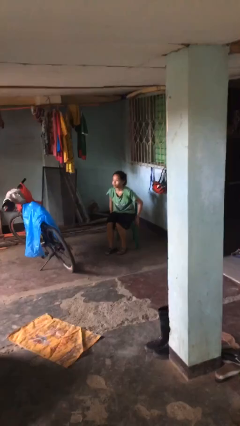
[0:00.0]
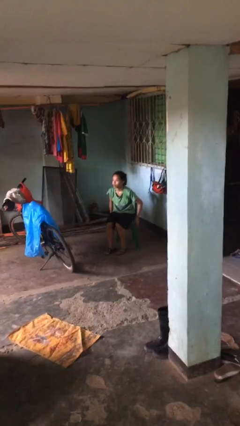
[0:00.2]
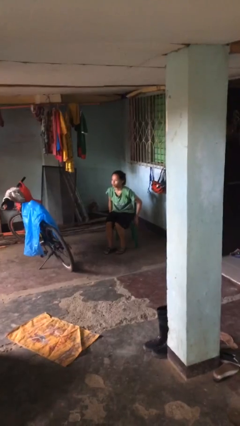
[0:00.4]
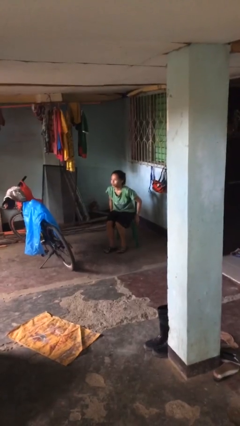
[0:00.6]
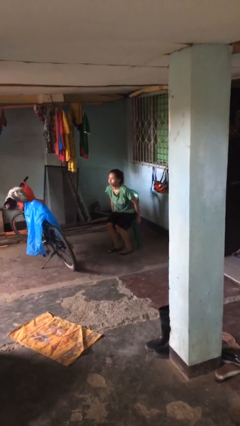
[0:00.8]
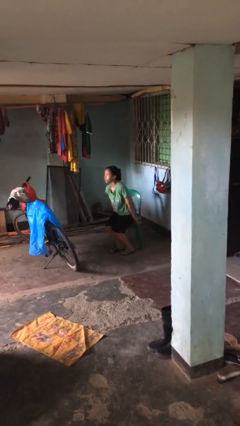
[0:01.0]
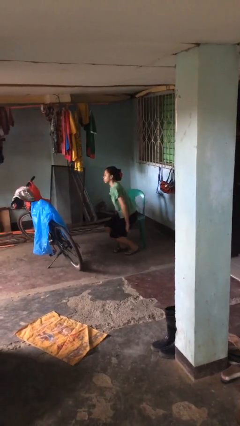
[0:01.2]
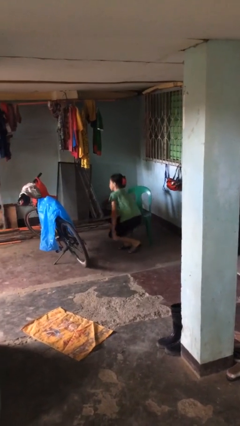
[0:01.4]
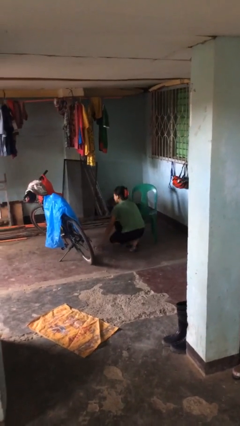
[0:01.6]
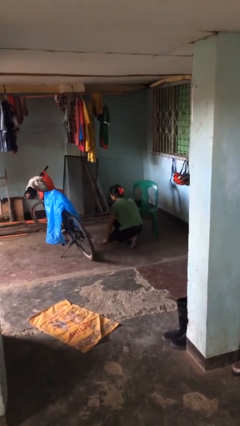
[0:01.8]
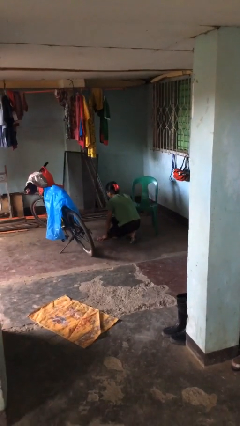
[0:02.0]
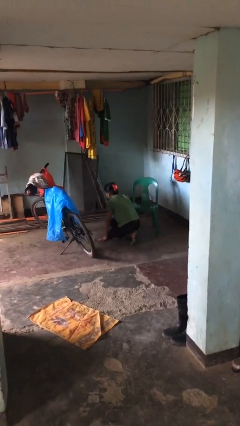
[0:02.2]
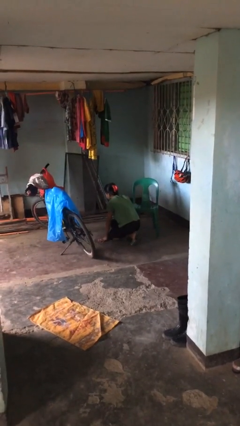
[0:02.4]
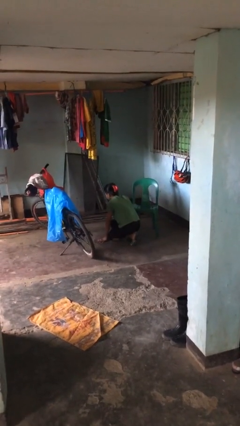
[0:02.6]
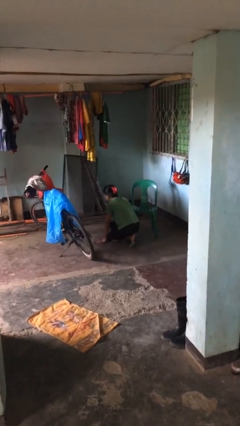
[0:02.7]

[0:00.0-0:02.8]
person falls from chair

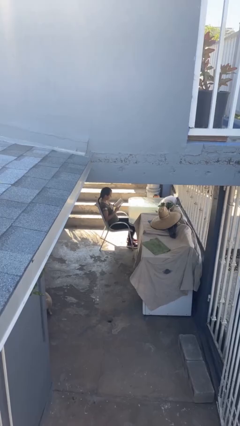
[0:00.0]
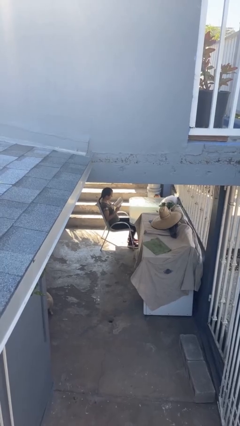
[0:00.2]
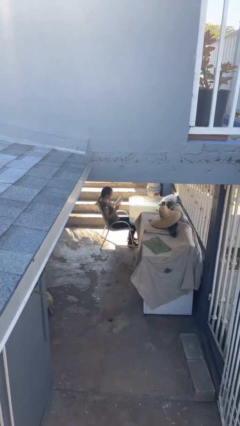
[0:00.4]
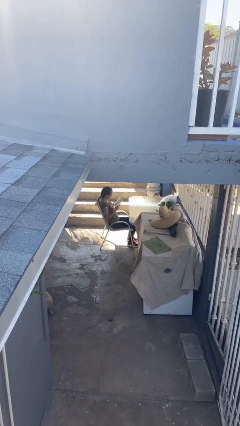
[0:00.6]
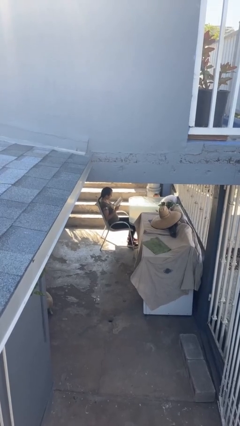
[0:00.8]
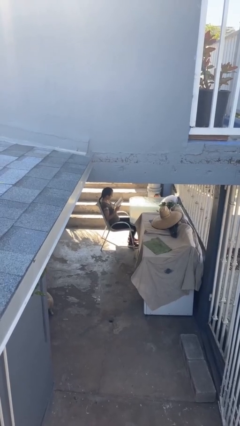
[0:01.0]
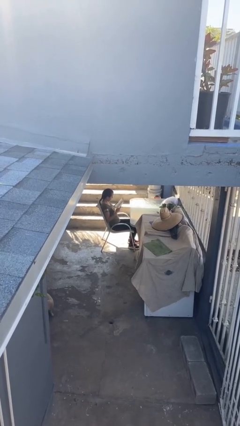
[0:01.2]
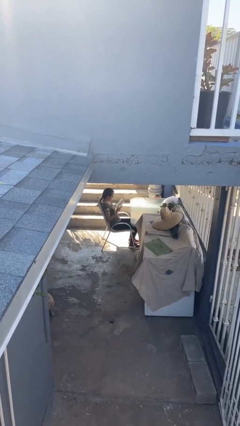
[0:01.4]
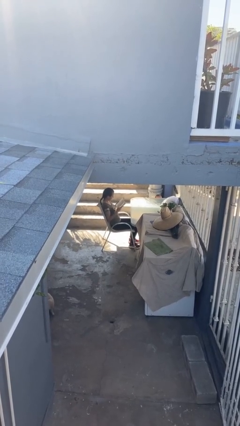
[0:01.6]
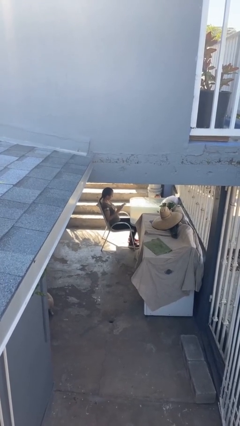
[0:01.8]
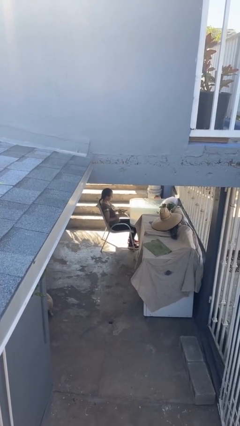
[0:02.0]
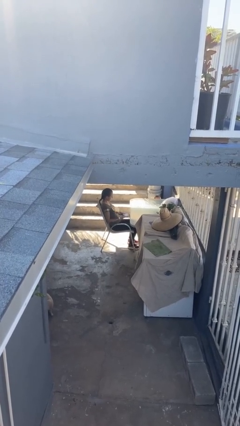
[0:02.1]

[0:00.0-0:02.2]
person reads document

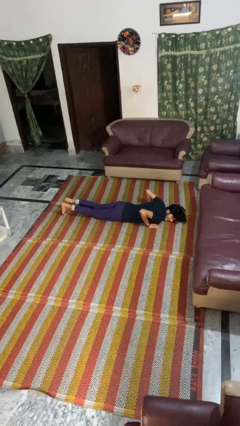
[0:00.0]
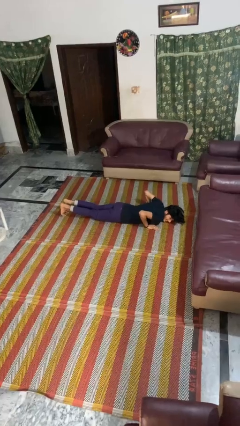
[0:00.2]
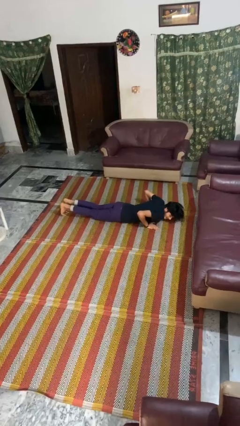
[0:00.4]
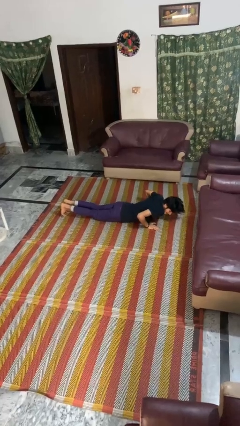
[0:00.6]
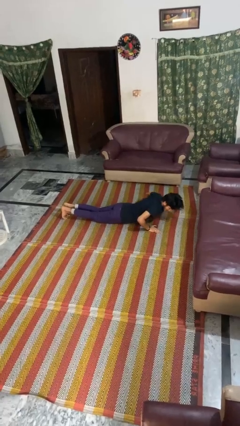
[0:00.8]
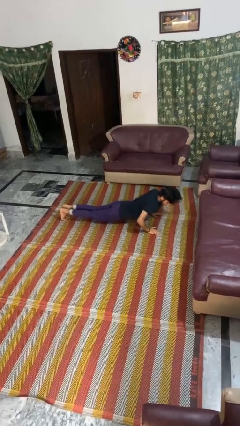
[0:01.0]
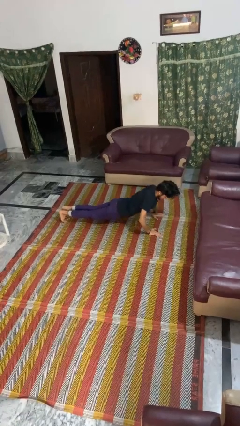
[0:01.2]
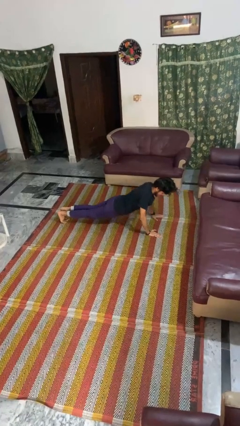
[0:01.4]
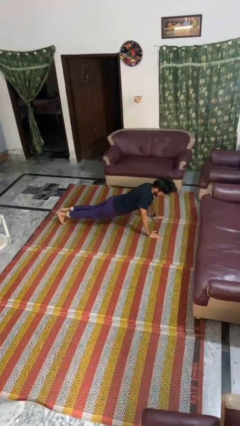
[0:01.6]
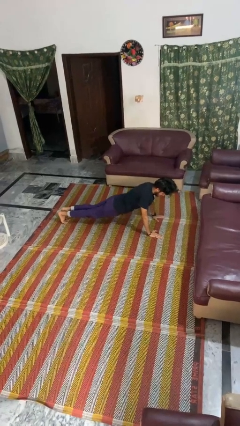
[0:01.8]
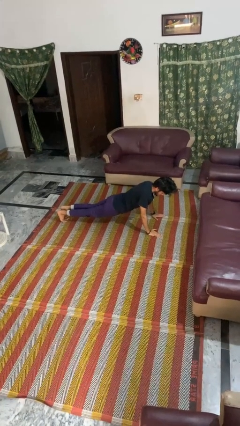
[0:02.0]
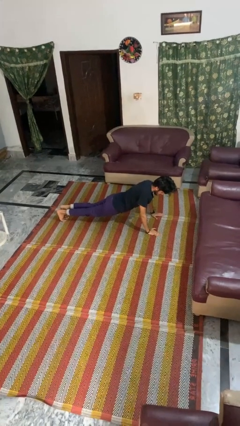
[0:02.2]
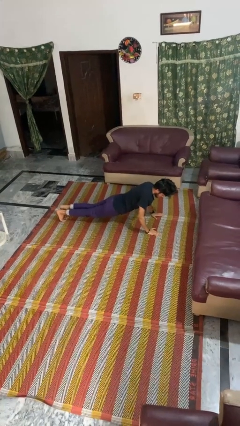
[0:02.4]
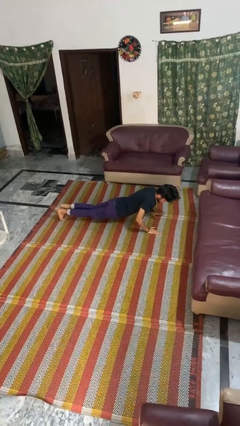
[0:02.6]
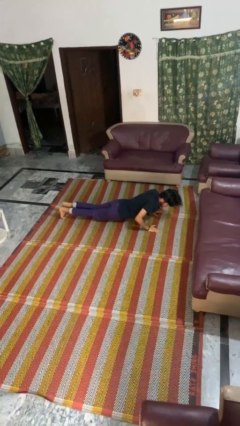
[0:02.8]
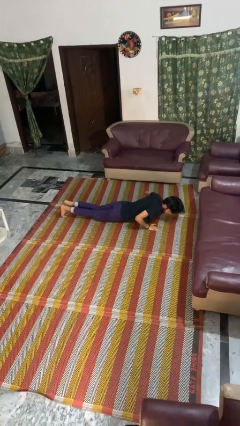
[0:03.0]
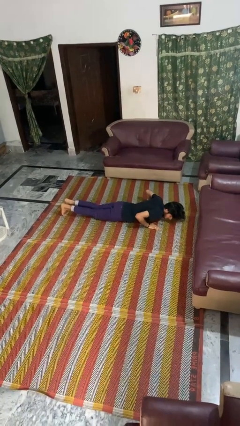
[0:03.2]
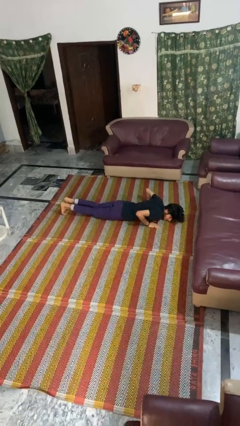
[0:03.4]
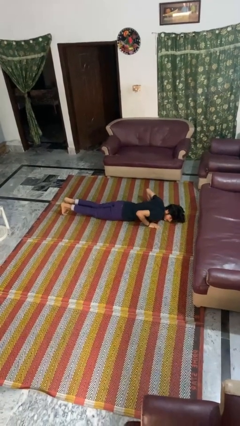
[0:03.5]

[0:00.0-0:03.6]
person exercises with pushup

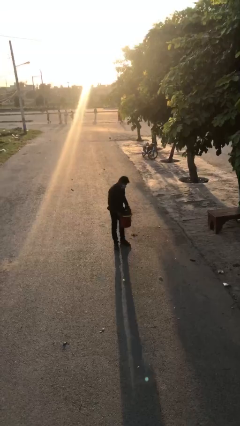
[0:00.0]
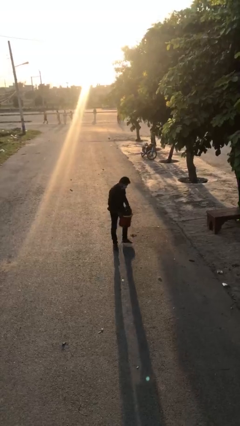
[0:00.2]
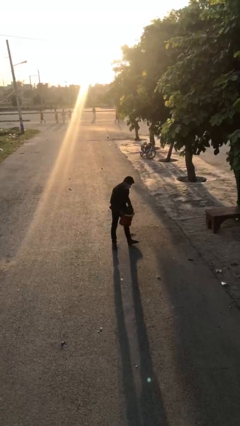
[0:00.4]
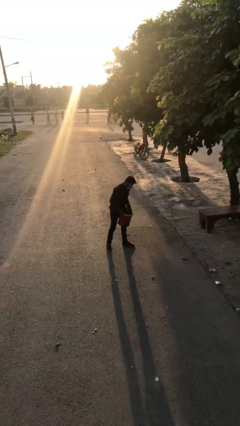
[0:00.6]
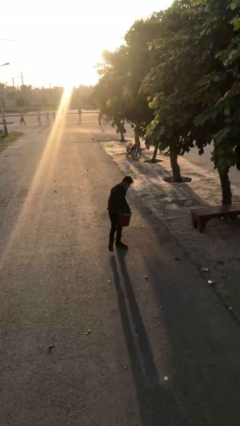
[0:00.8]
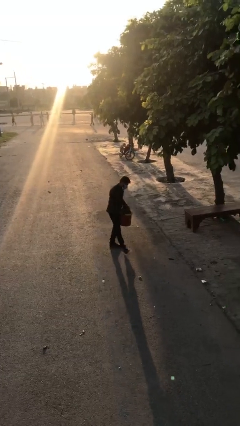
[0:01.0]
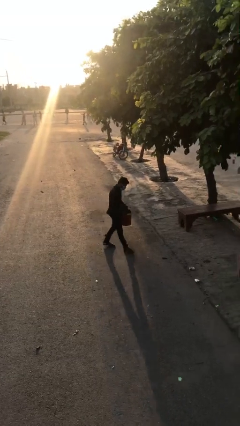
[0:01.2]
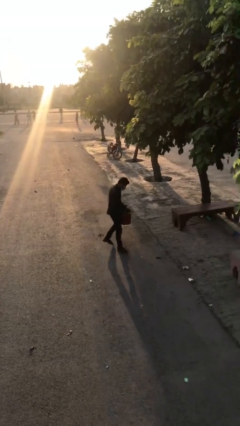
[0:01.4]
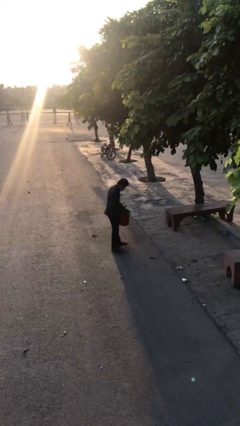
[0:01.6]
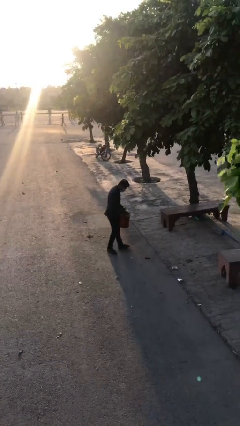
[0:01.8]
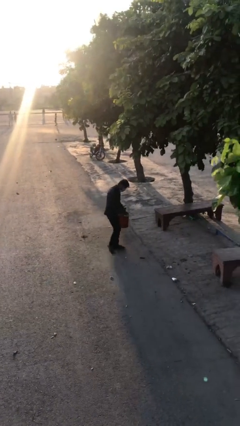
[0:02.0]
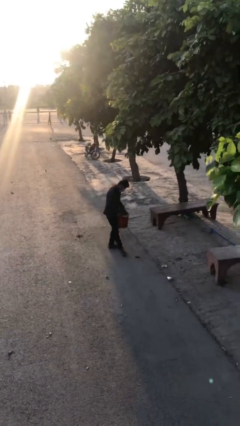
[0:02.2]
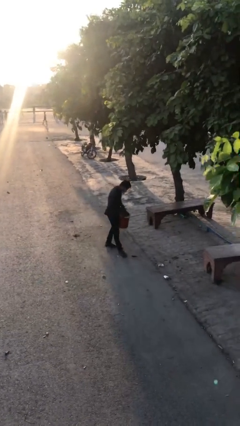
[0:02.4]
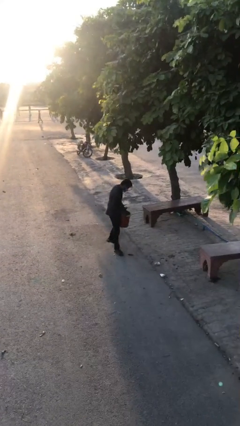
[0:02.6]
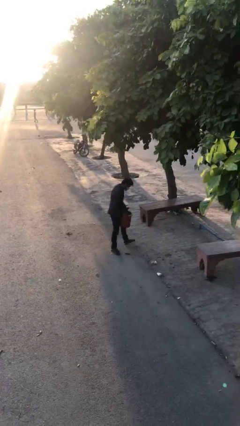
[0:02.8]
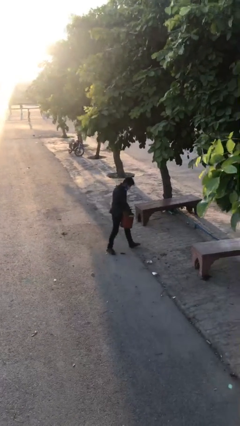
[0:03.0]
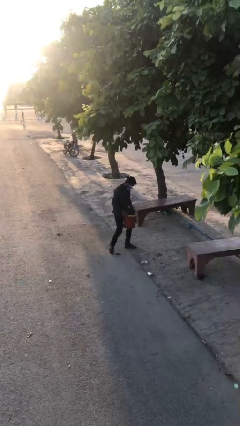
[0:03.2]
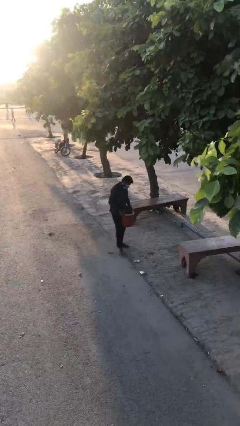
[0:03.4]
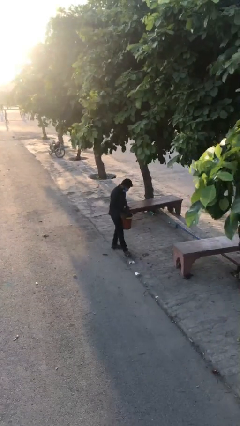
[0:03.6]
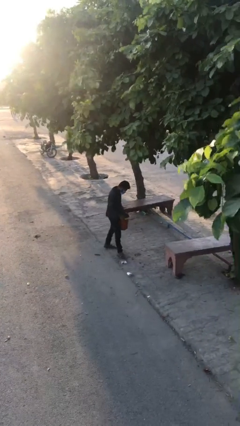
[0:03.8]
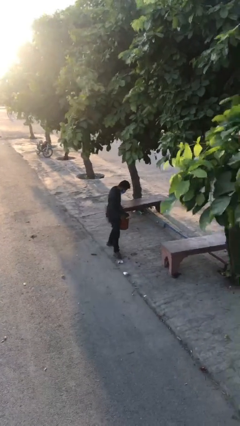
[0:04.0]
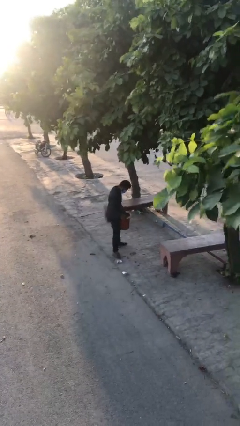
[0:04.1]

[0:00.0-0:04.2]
person carries heavy object

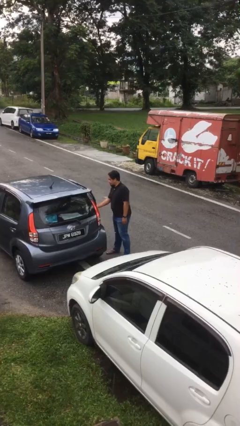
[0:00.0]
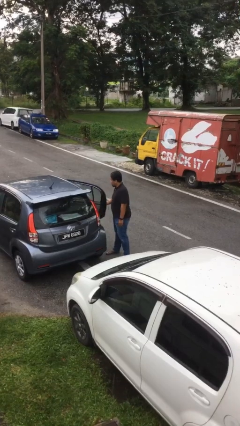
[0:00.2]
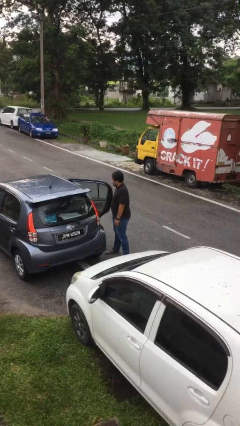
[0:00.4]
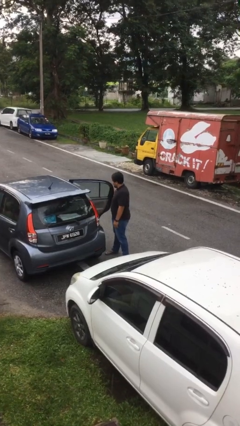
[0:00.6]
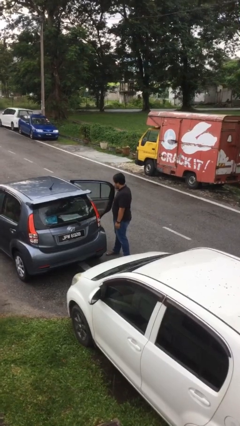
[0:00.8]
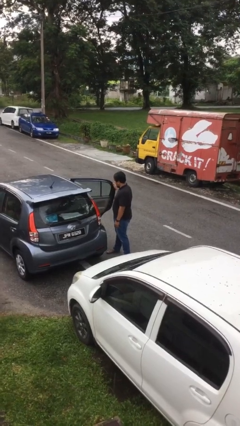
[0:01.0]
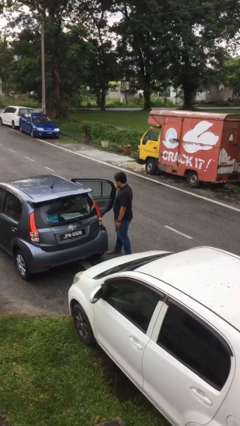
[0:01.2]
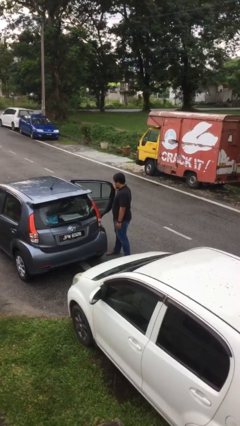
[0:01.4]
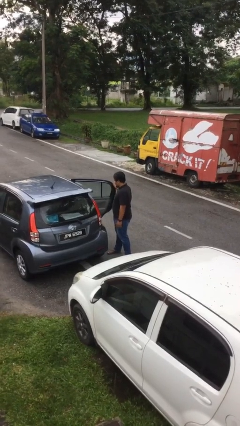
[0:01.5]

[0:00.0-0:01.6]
person opens car door

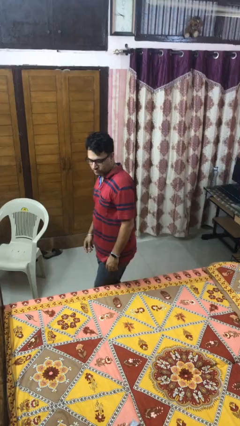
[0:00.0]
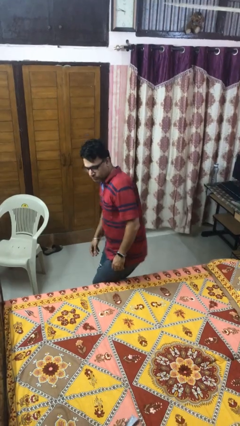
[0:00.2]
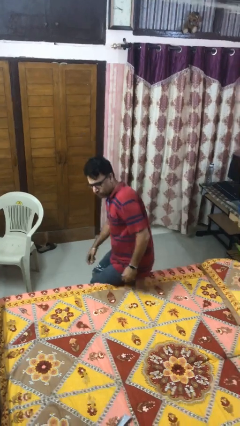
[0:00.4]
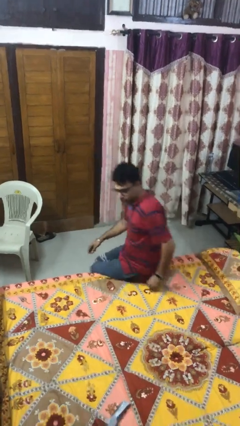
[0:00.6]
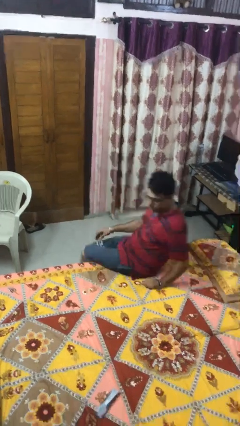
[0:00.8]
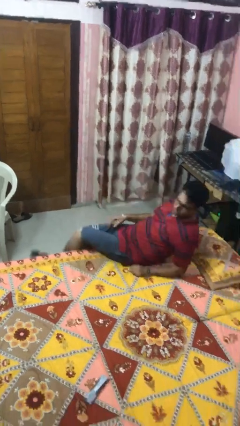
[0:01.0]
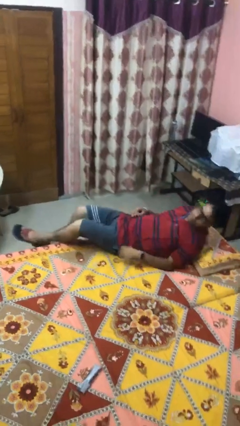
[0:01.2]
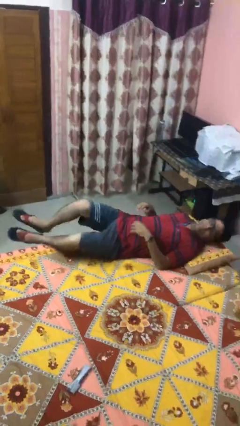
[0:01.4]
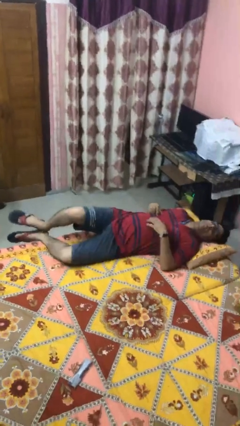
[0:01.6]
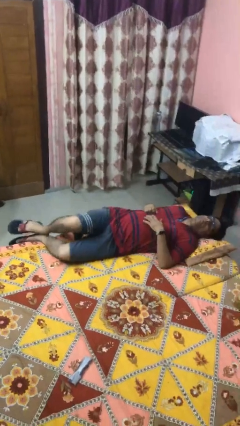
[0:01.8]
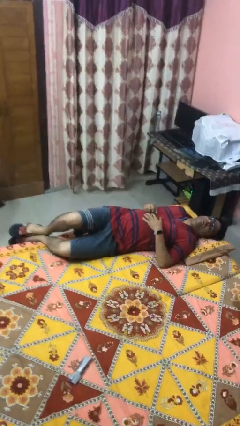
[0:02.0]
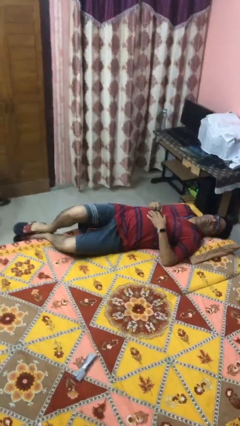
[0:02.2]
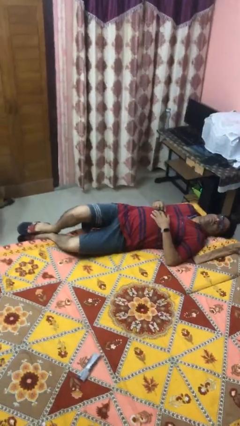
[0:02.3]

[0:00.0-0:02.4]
person lies down on bed

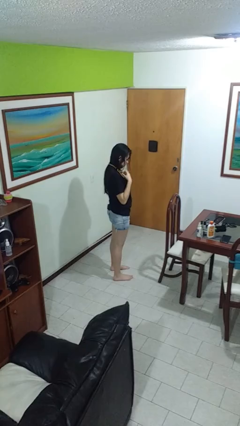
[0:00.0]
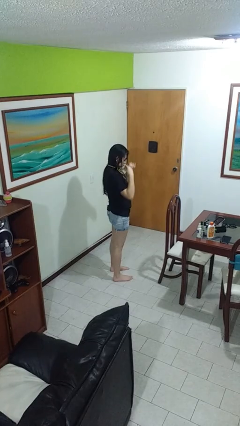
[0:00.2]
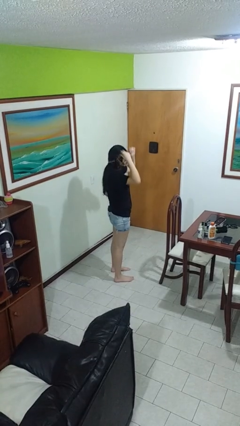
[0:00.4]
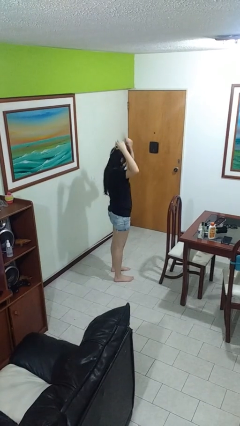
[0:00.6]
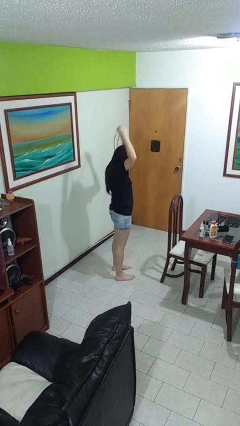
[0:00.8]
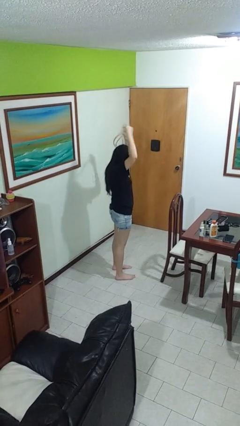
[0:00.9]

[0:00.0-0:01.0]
person takes off necklace
